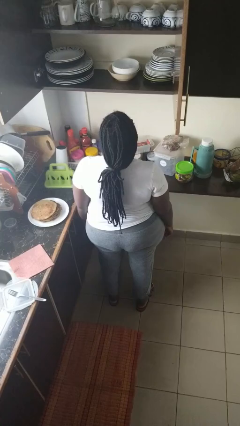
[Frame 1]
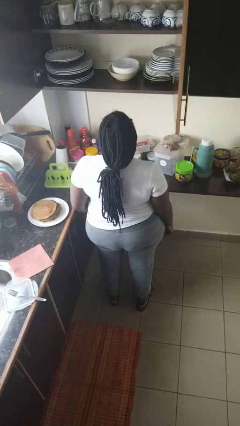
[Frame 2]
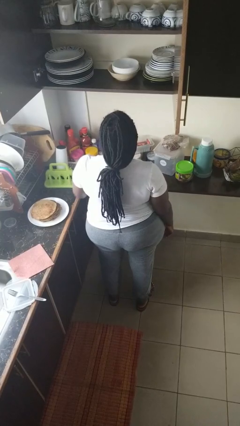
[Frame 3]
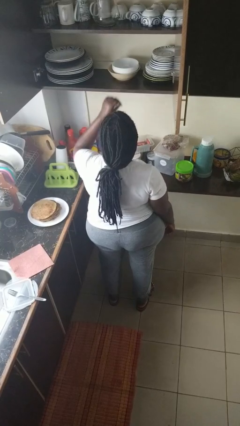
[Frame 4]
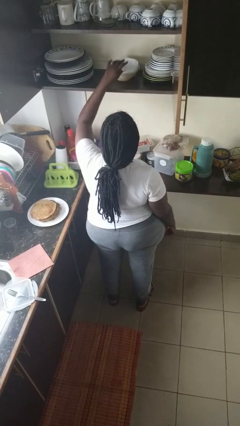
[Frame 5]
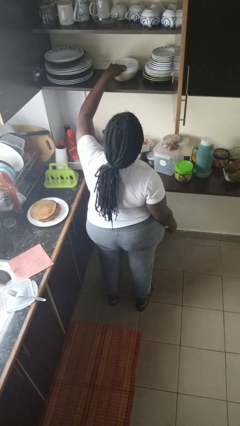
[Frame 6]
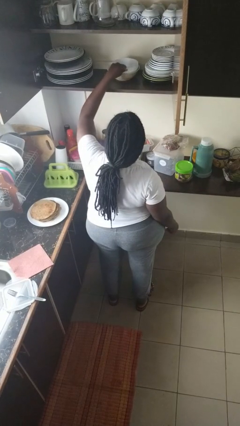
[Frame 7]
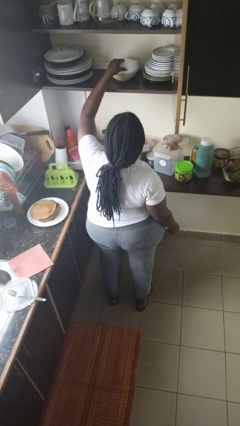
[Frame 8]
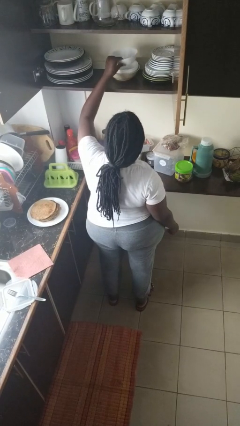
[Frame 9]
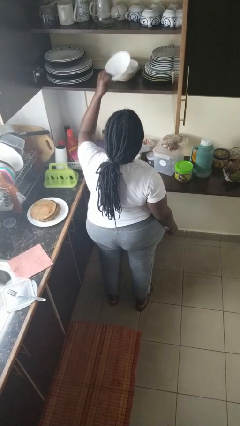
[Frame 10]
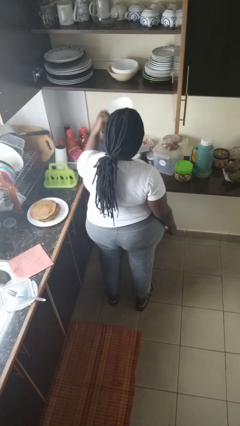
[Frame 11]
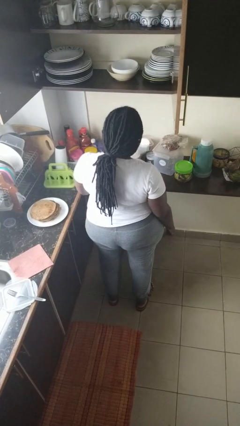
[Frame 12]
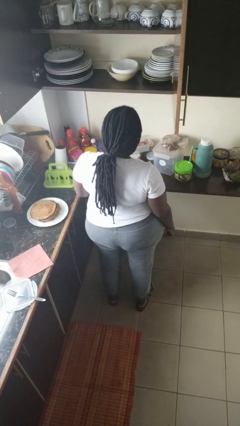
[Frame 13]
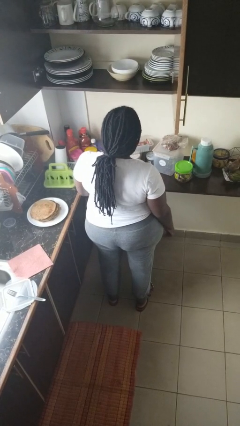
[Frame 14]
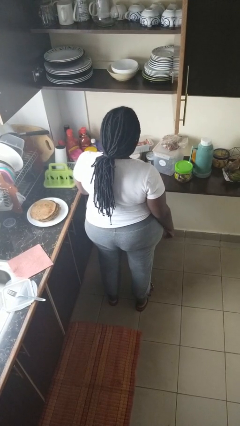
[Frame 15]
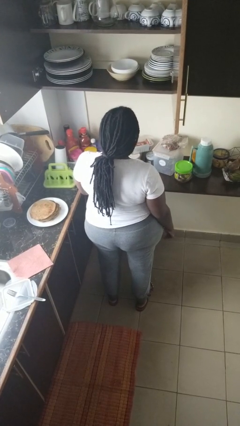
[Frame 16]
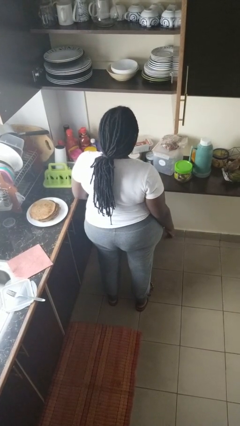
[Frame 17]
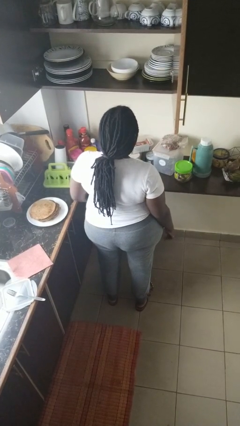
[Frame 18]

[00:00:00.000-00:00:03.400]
person takes object from cabinet

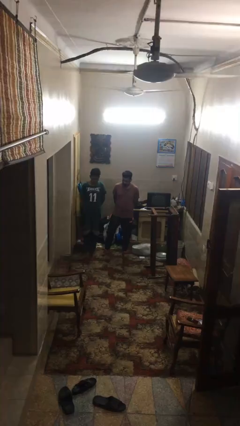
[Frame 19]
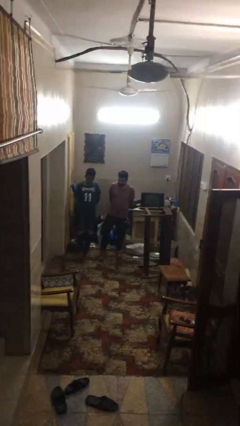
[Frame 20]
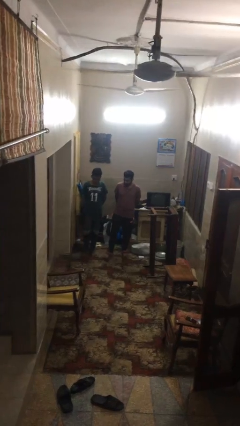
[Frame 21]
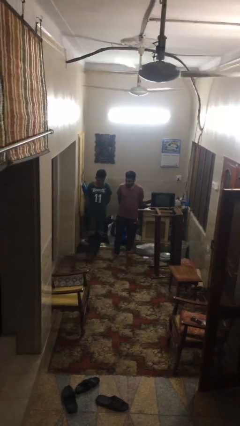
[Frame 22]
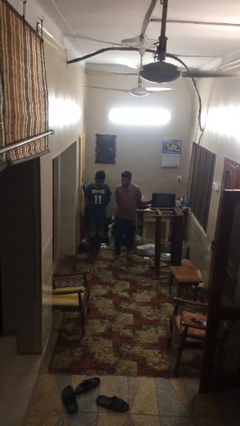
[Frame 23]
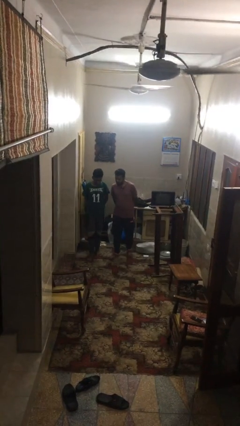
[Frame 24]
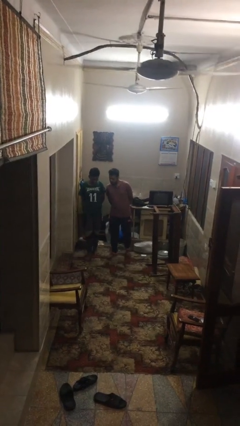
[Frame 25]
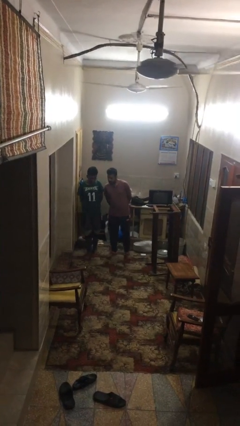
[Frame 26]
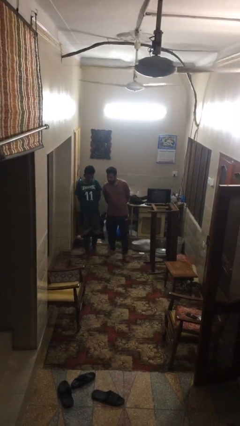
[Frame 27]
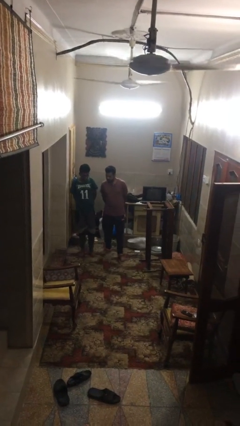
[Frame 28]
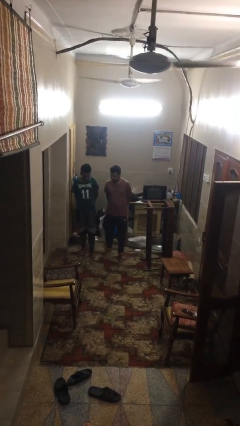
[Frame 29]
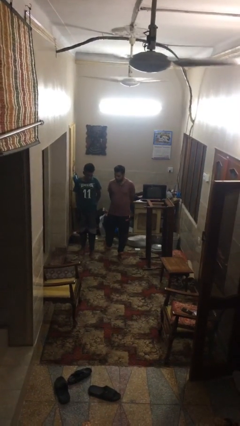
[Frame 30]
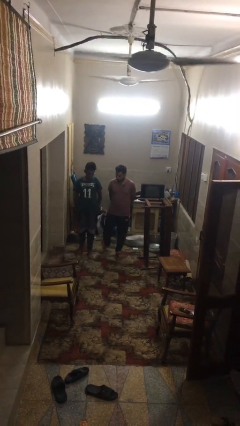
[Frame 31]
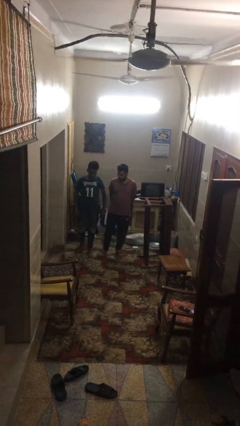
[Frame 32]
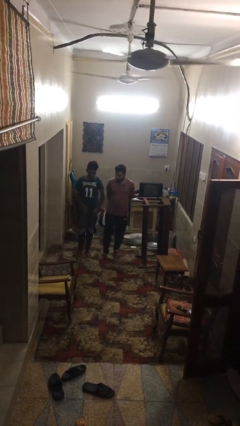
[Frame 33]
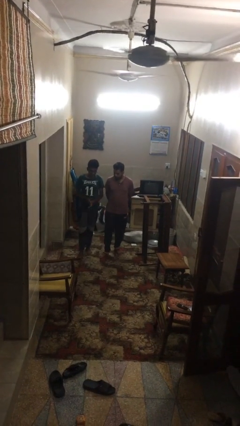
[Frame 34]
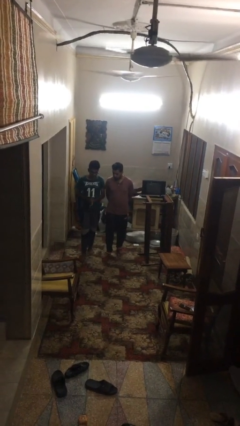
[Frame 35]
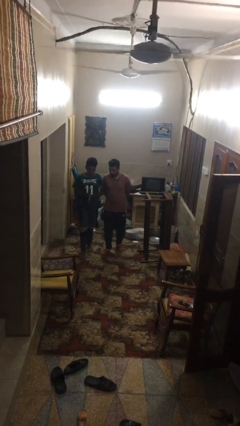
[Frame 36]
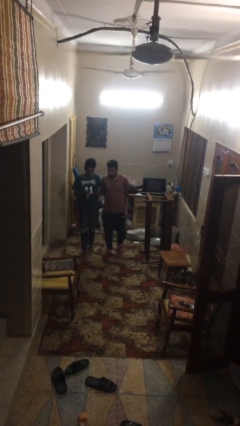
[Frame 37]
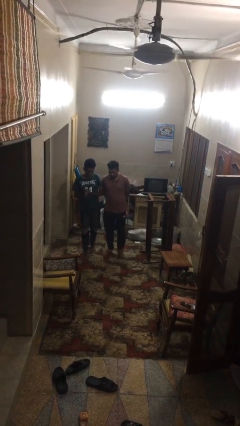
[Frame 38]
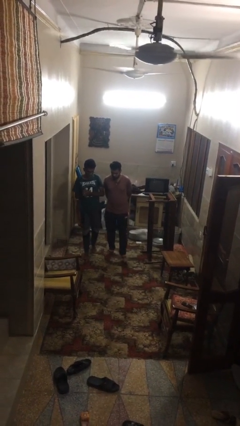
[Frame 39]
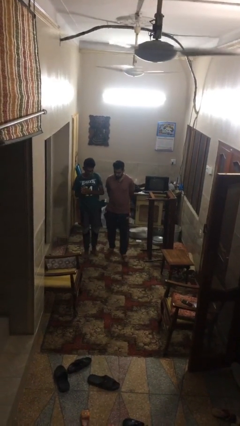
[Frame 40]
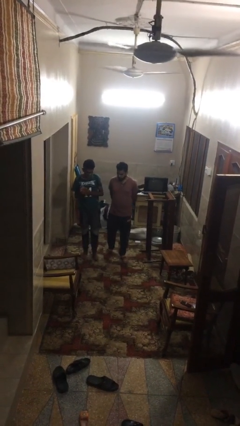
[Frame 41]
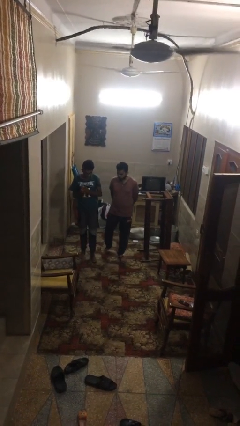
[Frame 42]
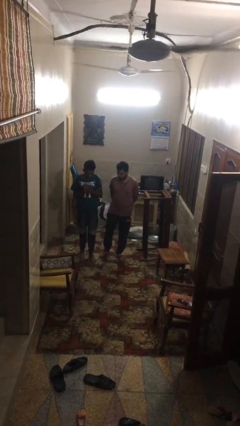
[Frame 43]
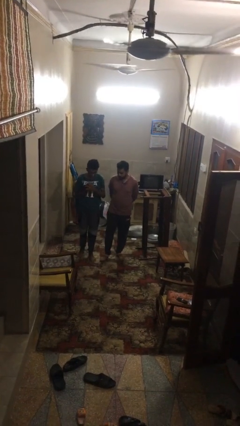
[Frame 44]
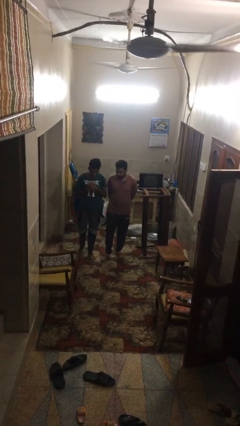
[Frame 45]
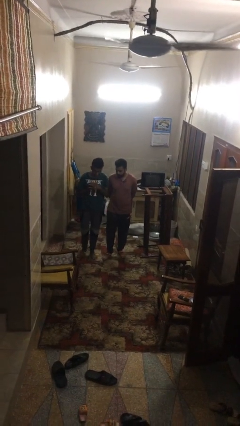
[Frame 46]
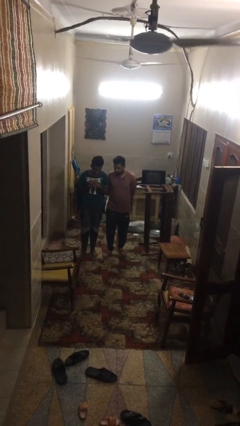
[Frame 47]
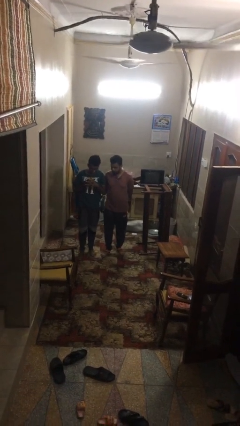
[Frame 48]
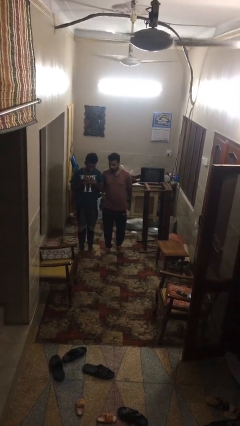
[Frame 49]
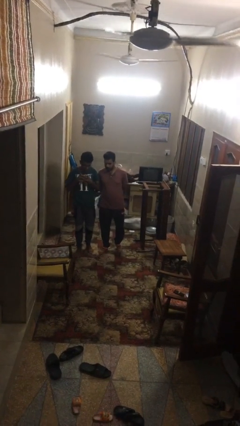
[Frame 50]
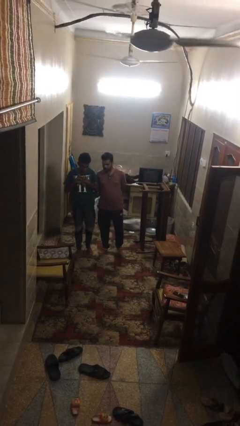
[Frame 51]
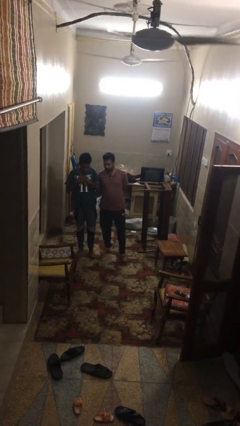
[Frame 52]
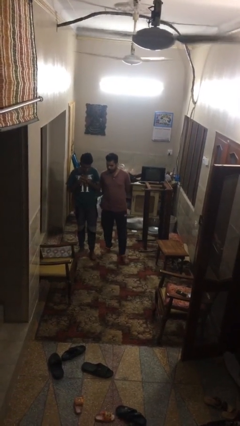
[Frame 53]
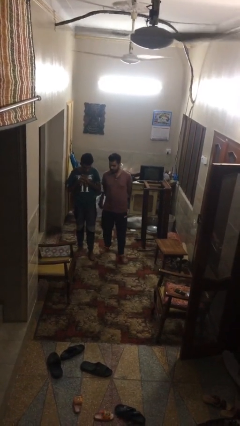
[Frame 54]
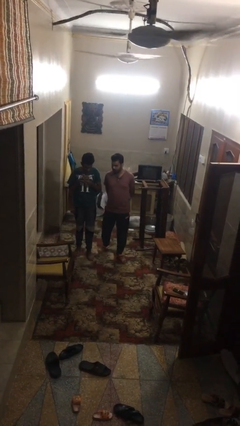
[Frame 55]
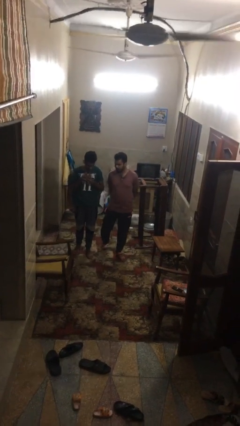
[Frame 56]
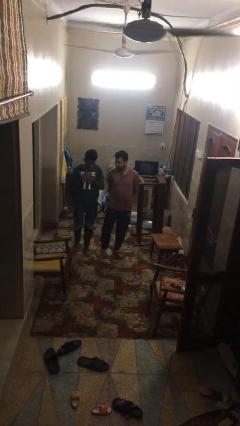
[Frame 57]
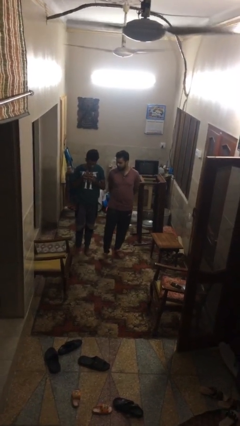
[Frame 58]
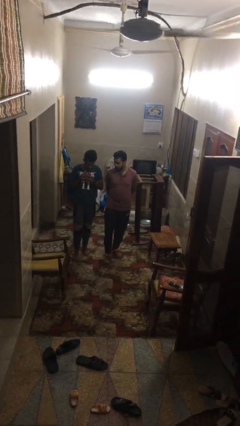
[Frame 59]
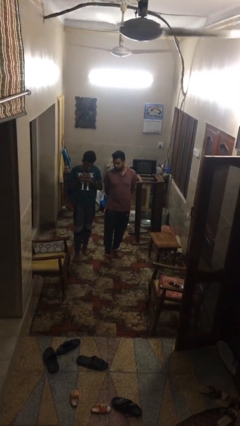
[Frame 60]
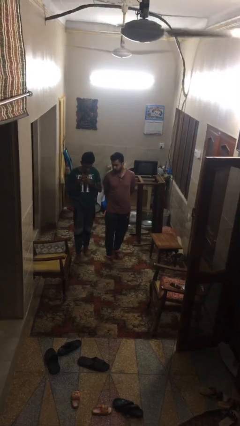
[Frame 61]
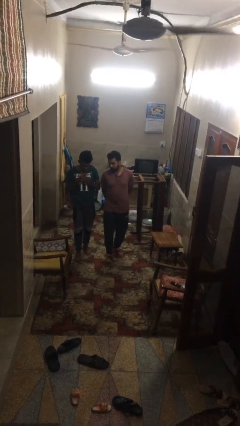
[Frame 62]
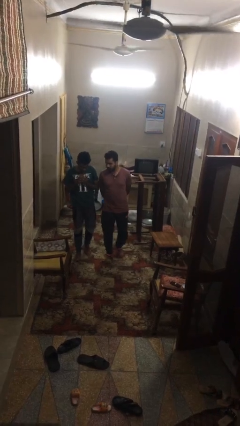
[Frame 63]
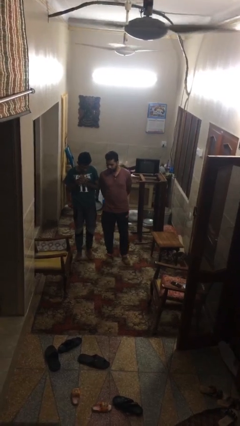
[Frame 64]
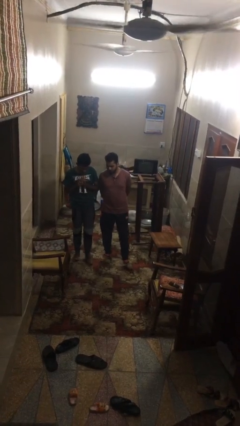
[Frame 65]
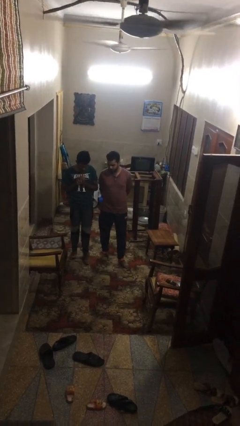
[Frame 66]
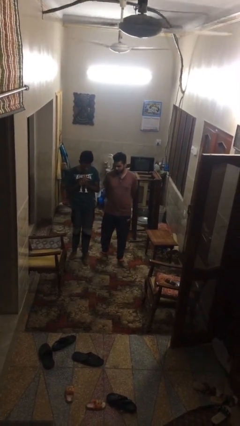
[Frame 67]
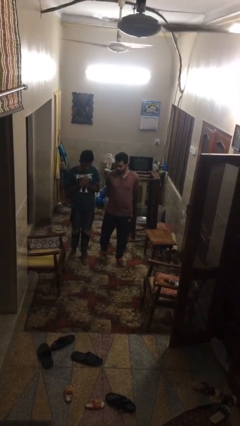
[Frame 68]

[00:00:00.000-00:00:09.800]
person talks to person

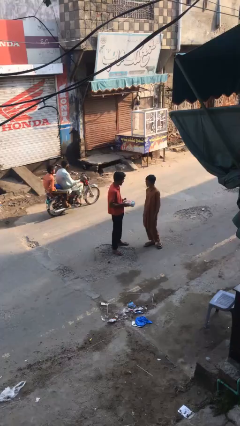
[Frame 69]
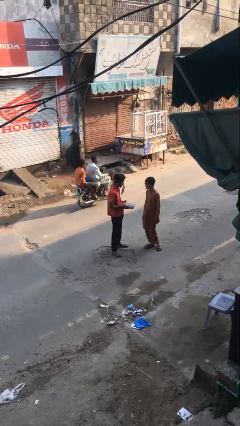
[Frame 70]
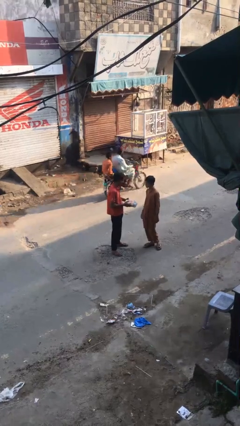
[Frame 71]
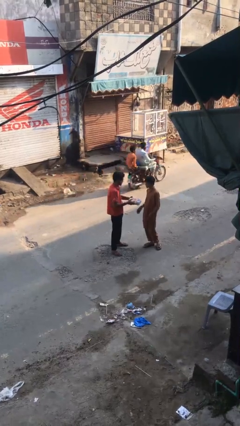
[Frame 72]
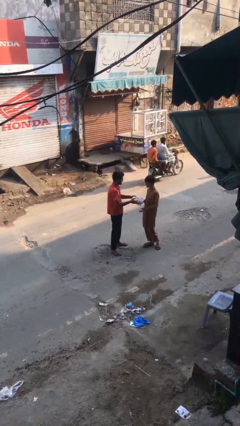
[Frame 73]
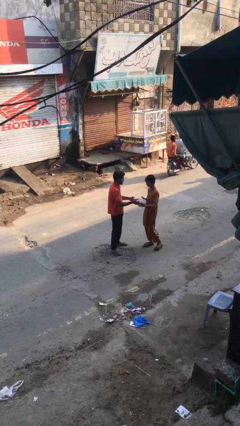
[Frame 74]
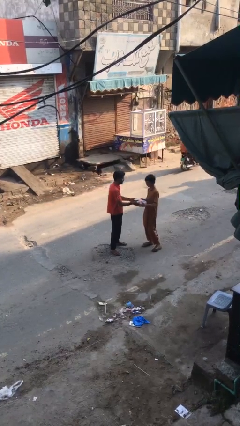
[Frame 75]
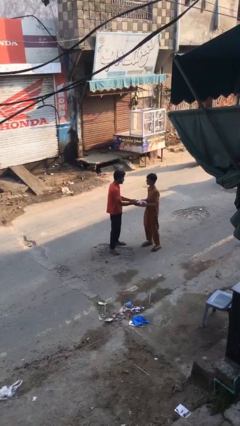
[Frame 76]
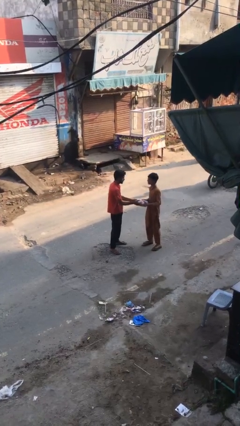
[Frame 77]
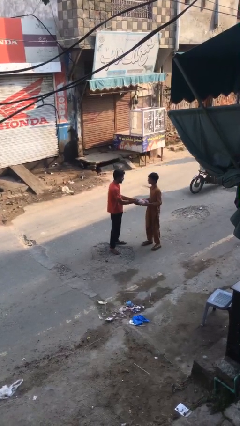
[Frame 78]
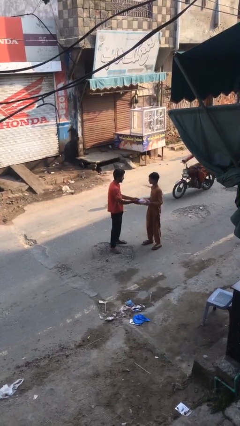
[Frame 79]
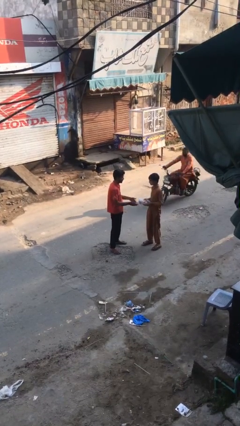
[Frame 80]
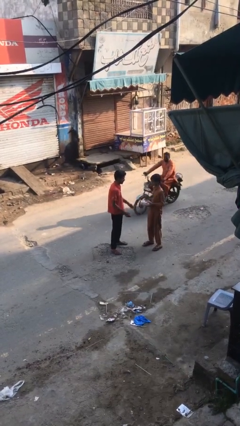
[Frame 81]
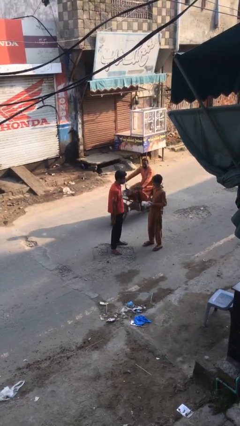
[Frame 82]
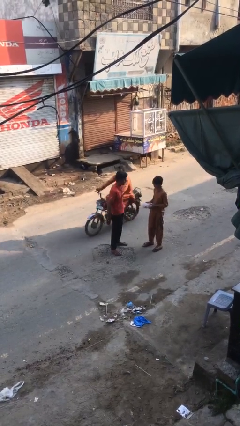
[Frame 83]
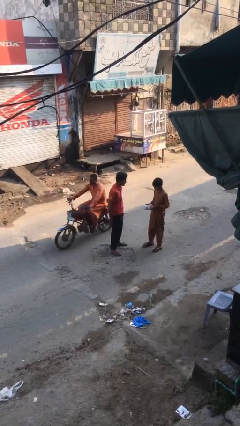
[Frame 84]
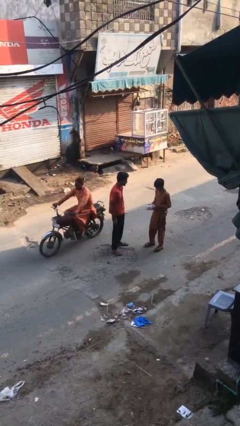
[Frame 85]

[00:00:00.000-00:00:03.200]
person transfers object to person

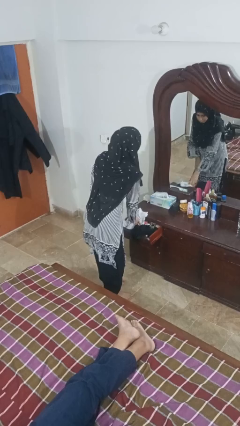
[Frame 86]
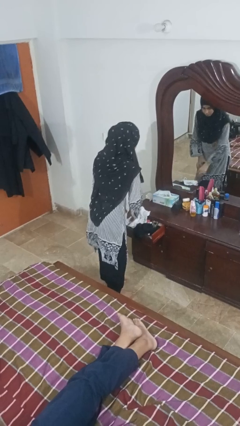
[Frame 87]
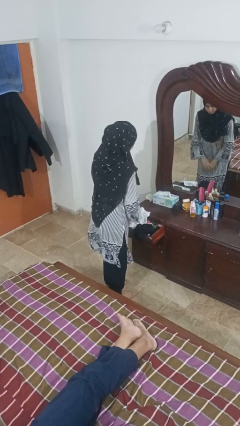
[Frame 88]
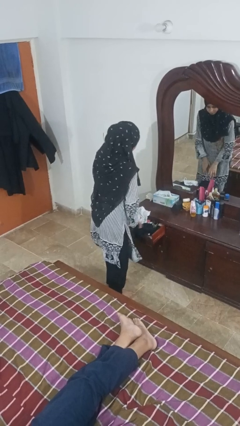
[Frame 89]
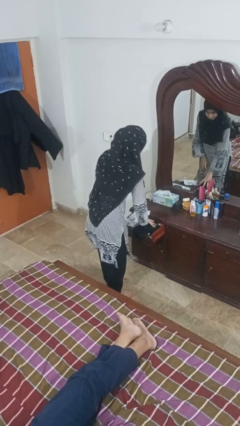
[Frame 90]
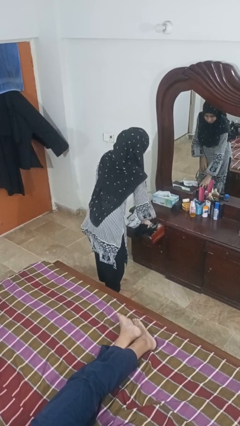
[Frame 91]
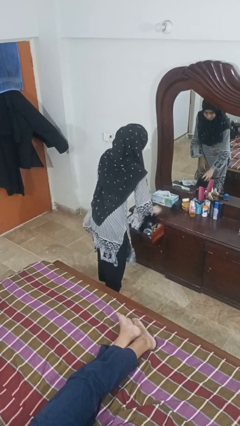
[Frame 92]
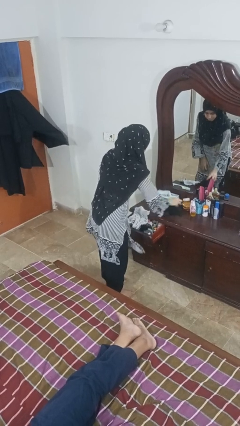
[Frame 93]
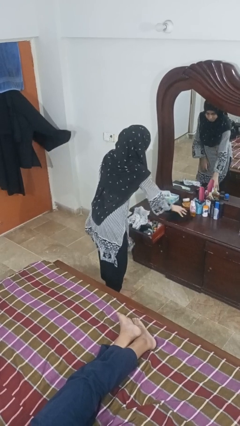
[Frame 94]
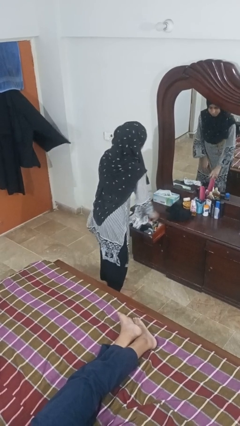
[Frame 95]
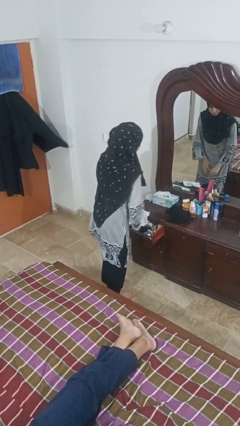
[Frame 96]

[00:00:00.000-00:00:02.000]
person takes clothes from dresser
